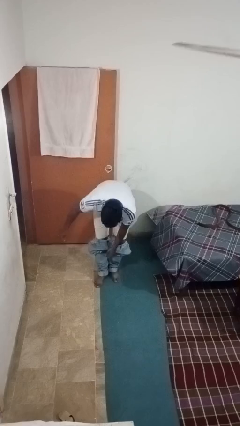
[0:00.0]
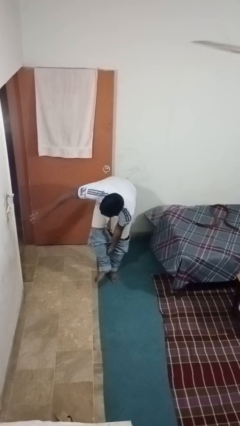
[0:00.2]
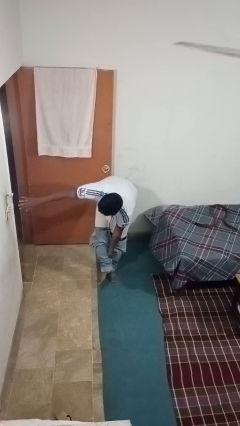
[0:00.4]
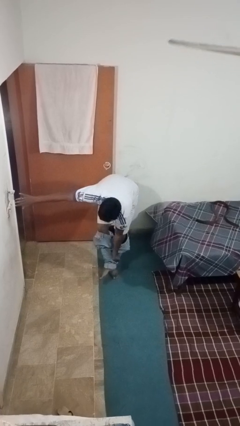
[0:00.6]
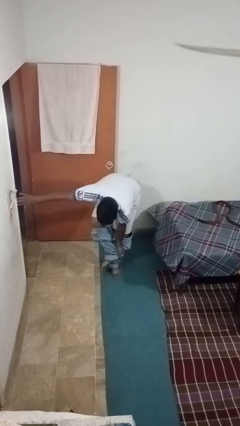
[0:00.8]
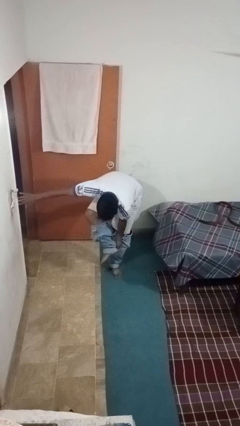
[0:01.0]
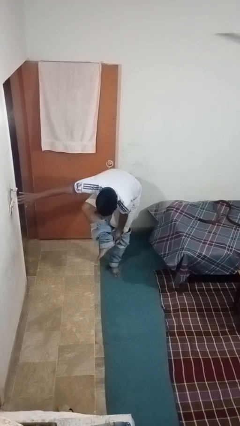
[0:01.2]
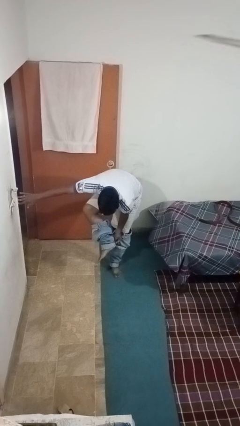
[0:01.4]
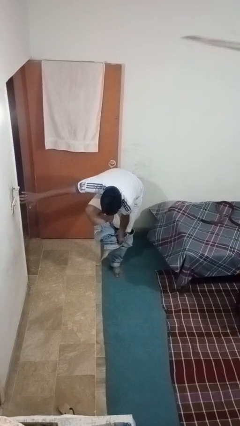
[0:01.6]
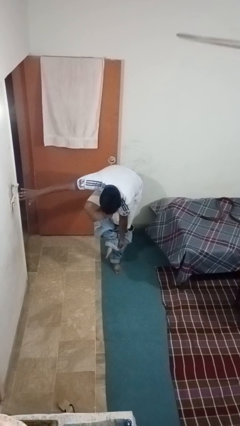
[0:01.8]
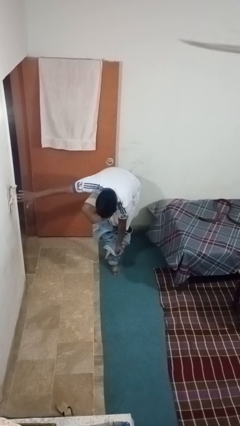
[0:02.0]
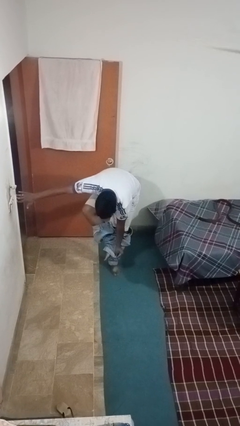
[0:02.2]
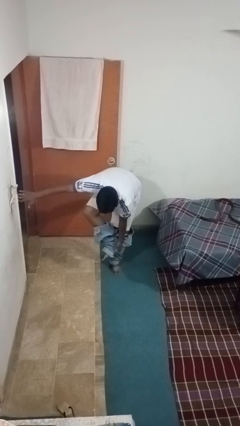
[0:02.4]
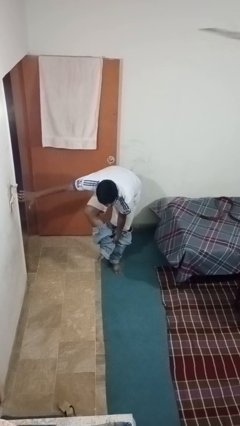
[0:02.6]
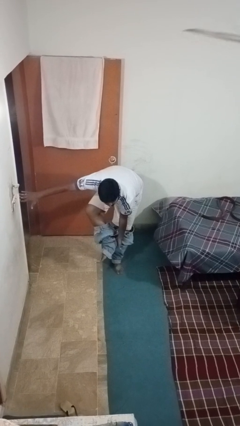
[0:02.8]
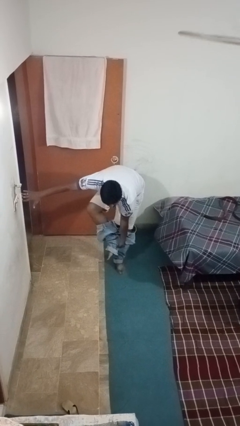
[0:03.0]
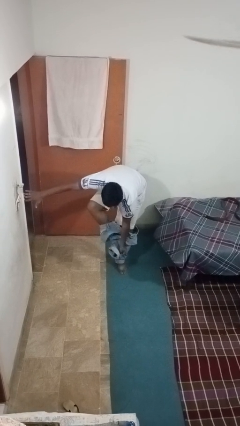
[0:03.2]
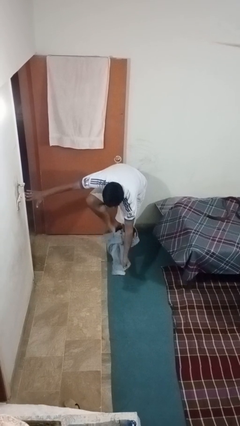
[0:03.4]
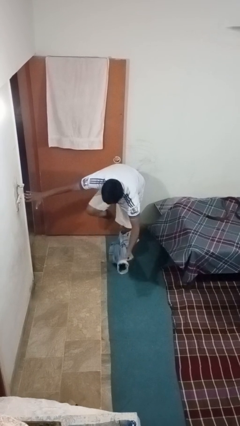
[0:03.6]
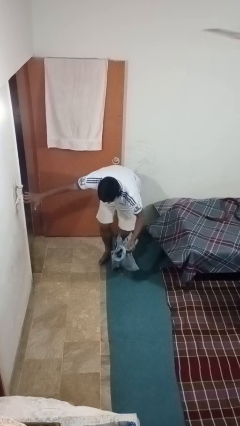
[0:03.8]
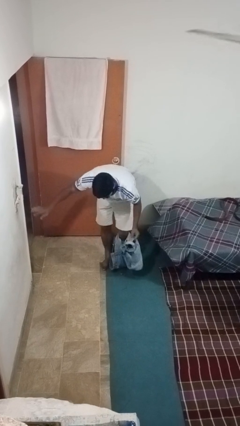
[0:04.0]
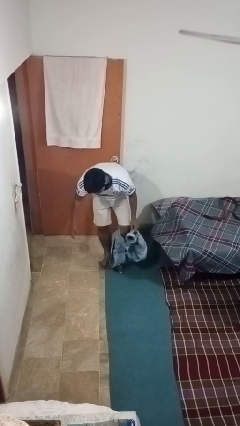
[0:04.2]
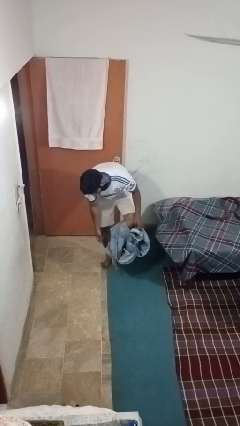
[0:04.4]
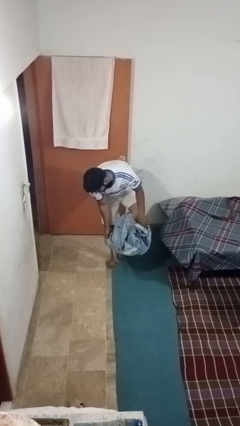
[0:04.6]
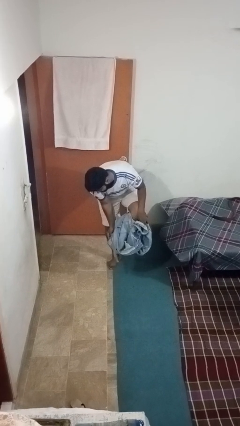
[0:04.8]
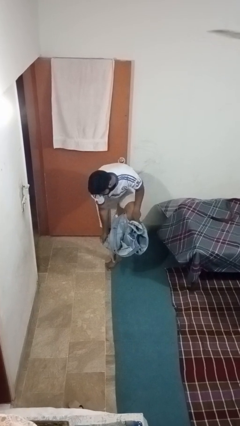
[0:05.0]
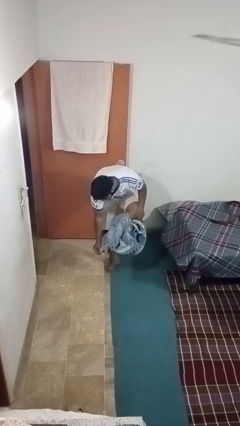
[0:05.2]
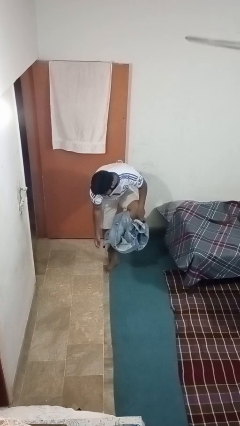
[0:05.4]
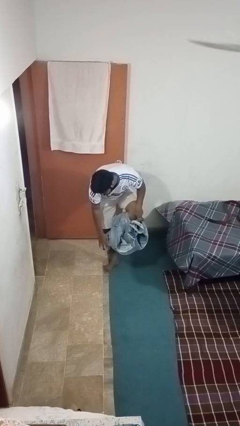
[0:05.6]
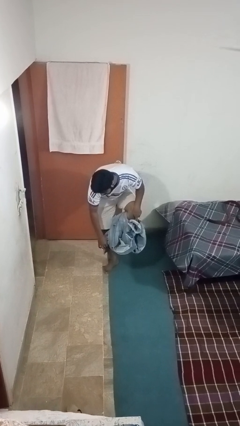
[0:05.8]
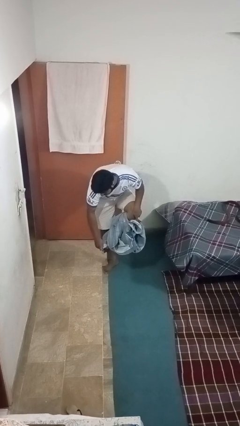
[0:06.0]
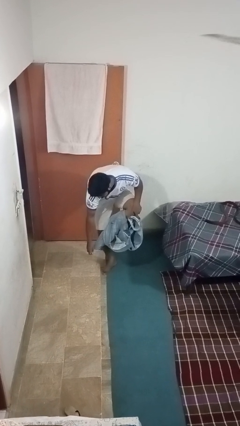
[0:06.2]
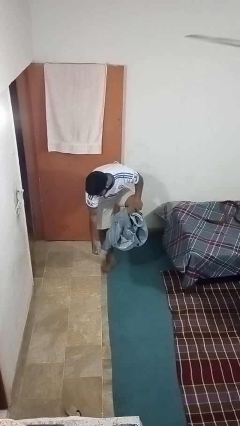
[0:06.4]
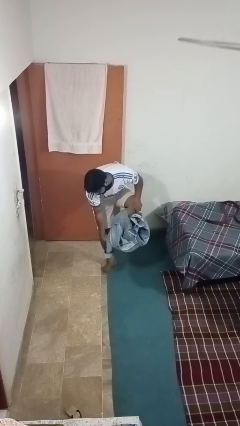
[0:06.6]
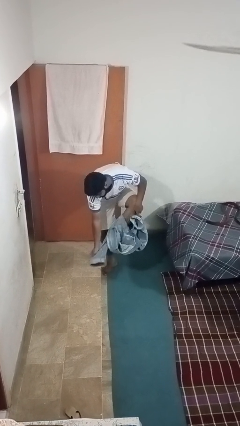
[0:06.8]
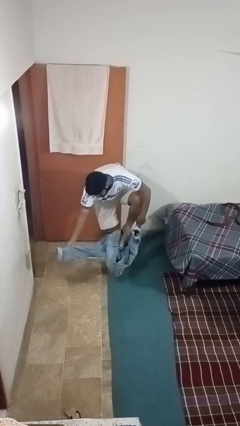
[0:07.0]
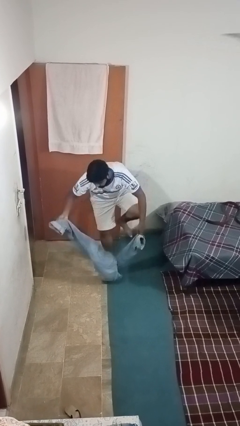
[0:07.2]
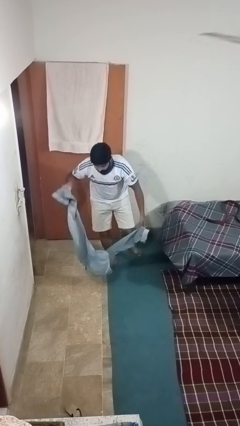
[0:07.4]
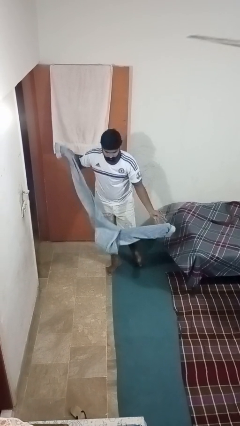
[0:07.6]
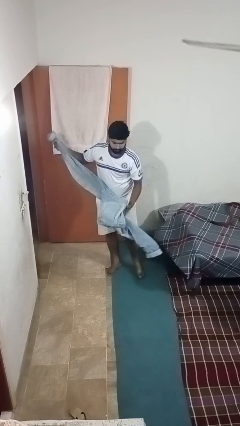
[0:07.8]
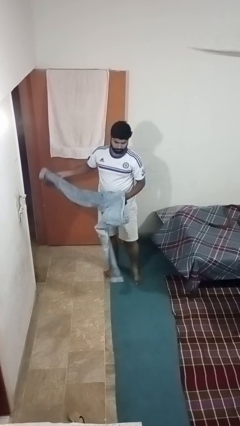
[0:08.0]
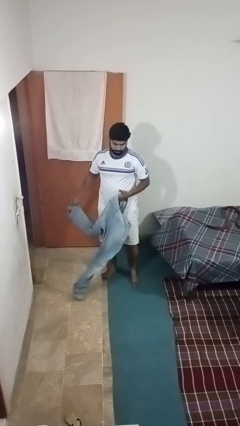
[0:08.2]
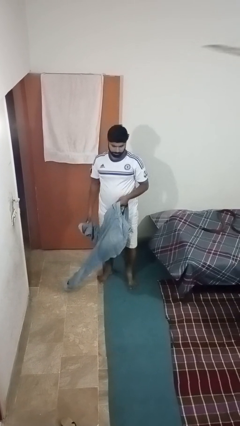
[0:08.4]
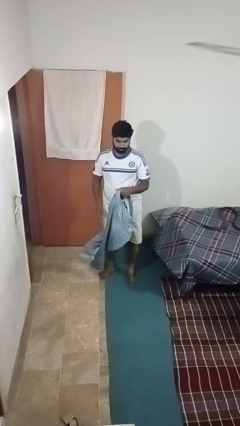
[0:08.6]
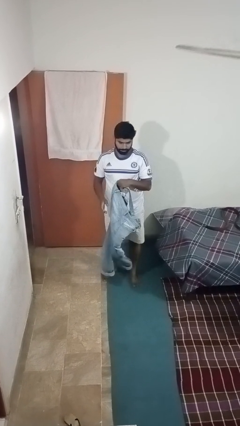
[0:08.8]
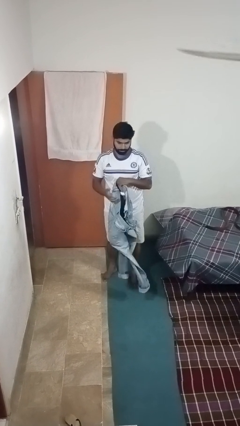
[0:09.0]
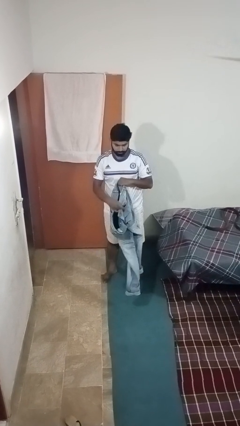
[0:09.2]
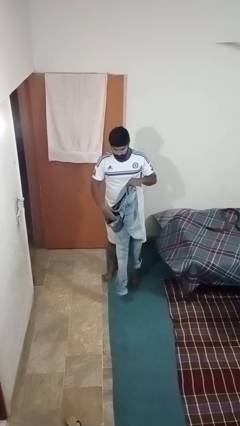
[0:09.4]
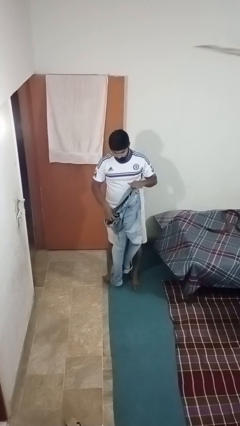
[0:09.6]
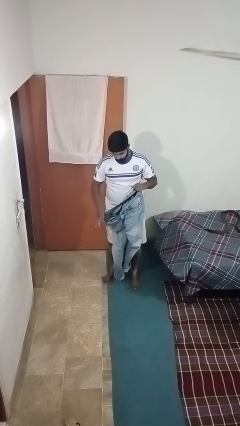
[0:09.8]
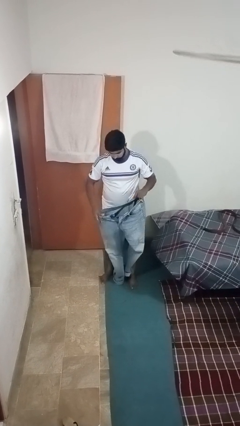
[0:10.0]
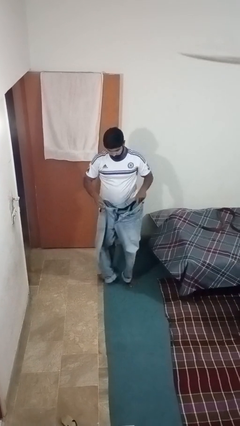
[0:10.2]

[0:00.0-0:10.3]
person takes off pants

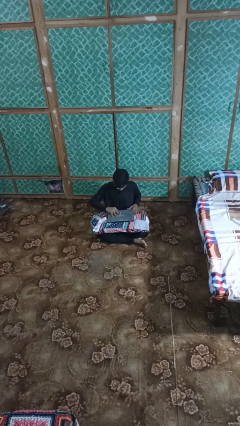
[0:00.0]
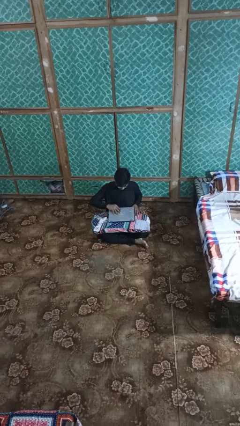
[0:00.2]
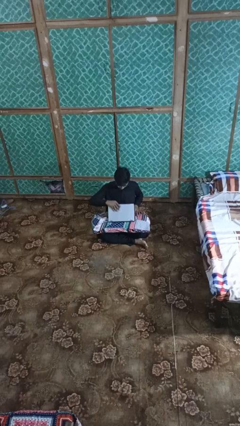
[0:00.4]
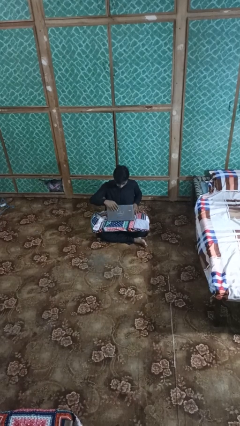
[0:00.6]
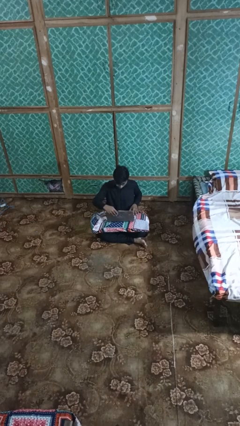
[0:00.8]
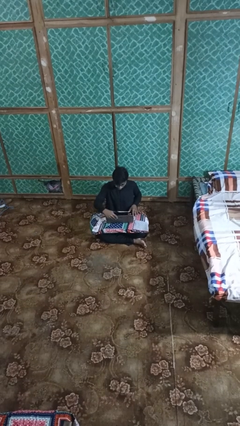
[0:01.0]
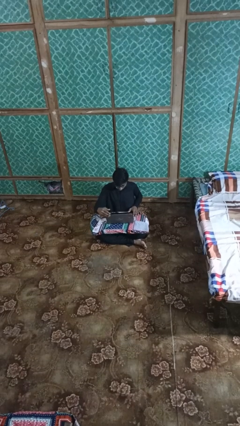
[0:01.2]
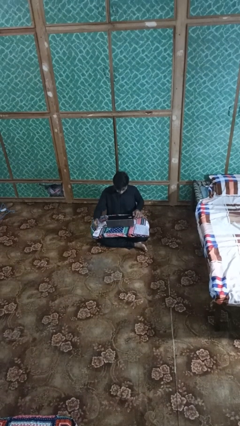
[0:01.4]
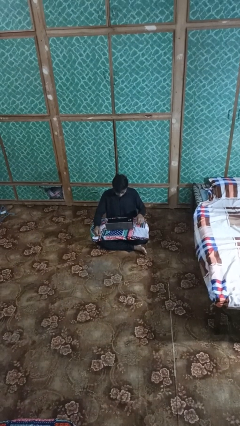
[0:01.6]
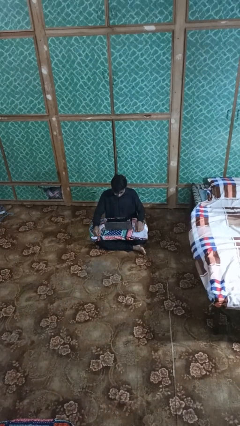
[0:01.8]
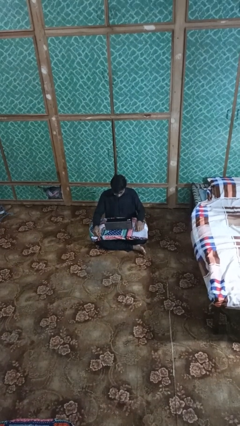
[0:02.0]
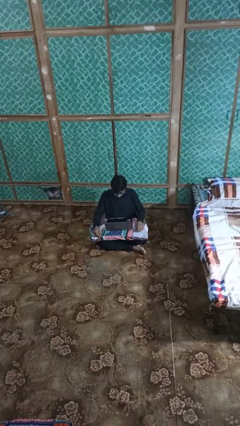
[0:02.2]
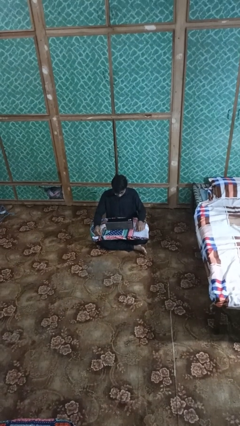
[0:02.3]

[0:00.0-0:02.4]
person opens laptop

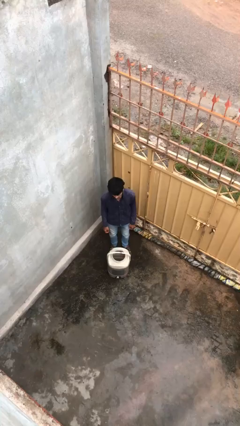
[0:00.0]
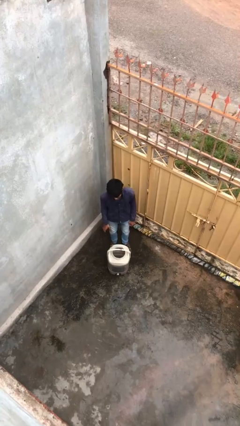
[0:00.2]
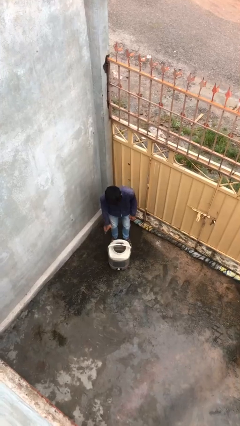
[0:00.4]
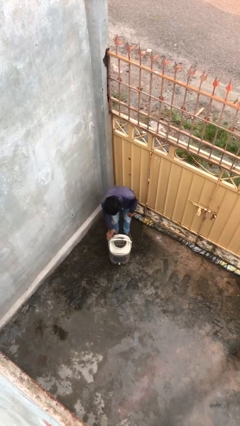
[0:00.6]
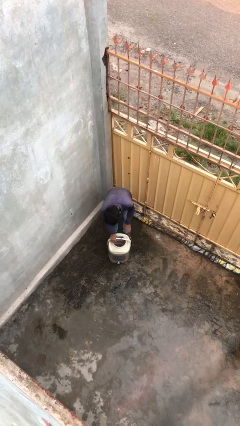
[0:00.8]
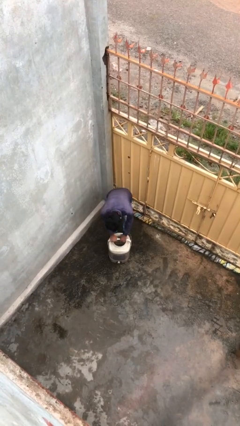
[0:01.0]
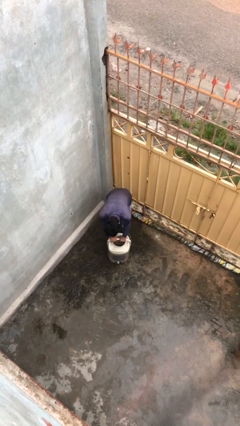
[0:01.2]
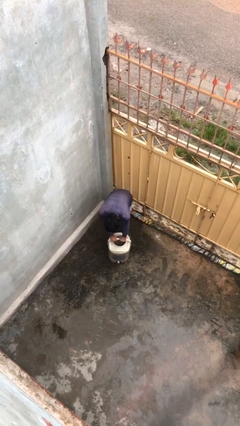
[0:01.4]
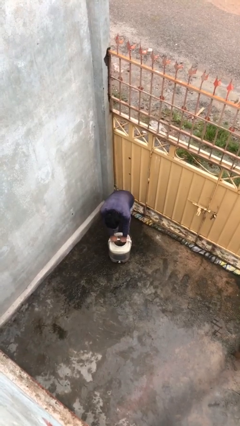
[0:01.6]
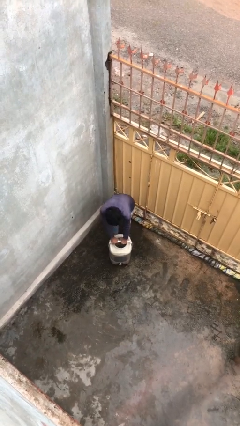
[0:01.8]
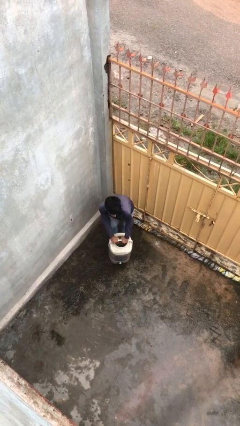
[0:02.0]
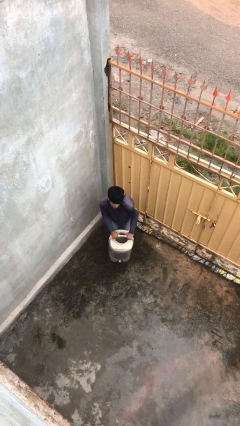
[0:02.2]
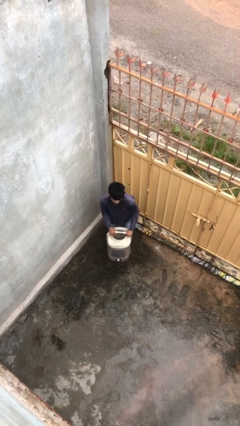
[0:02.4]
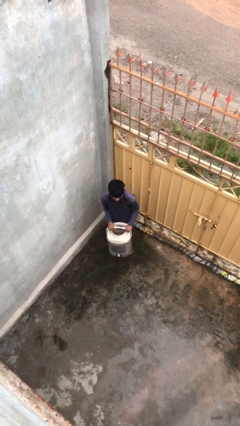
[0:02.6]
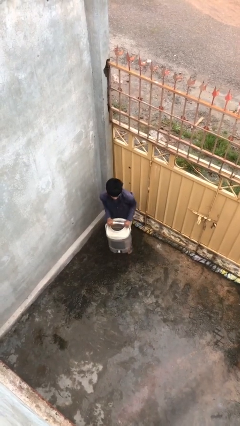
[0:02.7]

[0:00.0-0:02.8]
person picks up object from floor

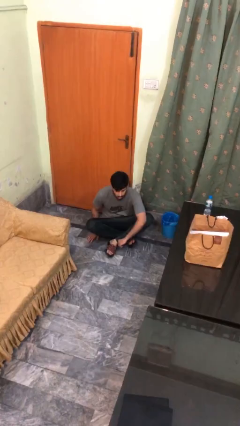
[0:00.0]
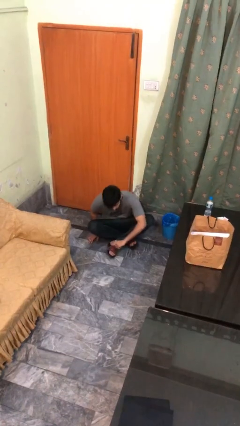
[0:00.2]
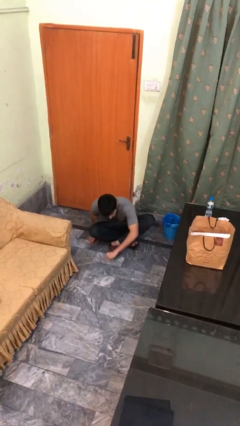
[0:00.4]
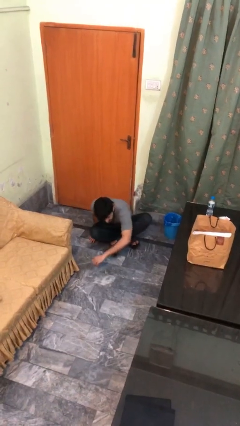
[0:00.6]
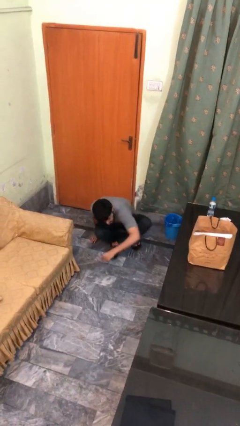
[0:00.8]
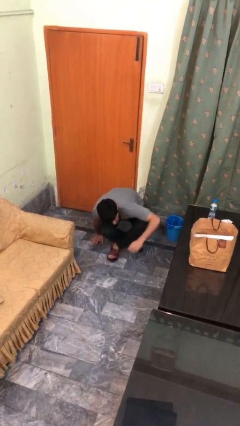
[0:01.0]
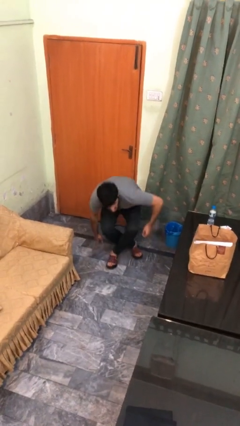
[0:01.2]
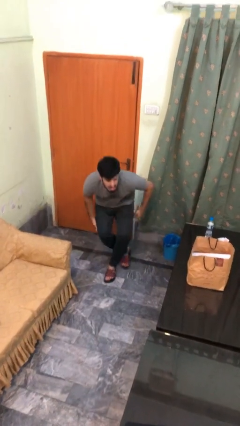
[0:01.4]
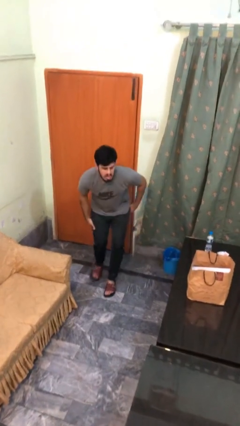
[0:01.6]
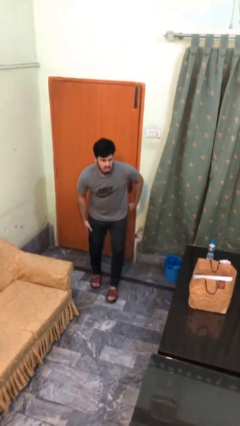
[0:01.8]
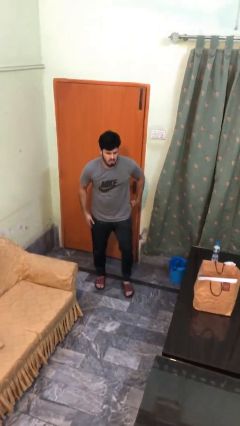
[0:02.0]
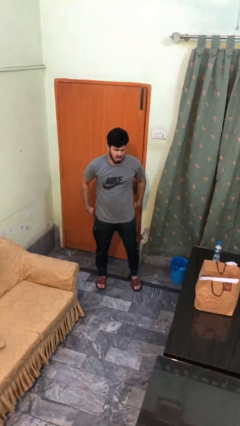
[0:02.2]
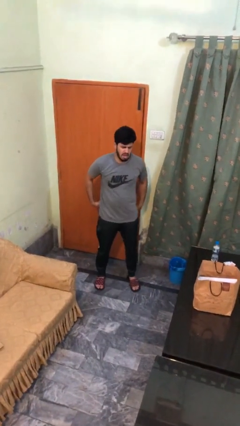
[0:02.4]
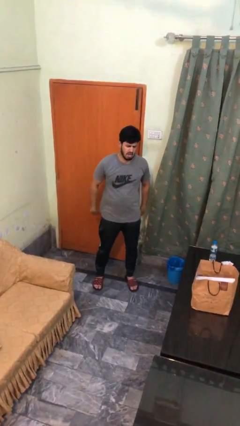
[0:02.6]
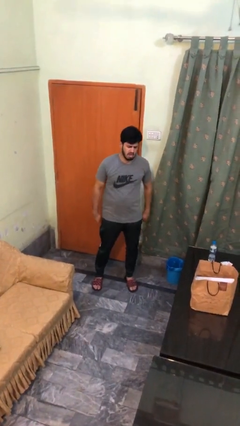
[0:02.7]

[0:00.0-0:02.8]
person stands up from floor
